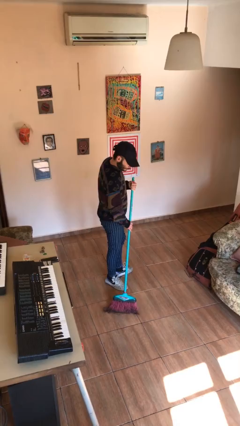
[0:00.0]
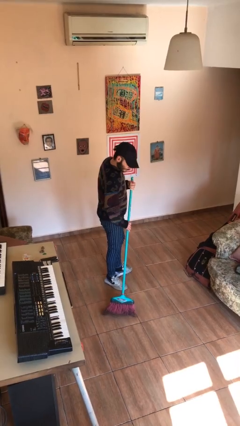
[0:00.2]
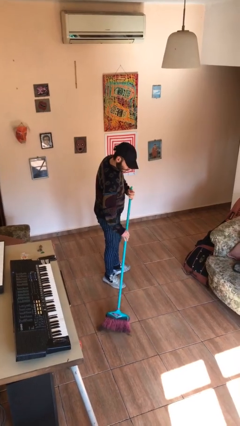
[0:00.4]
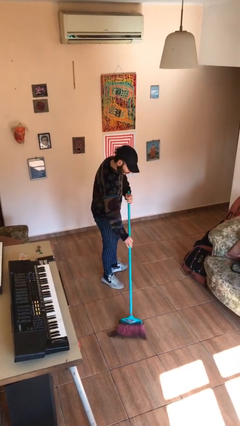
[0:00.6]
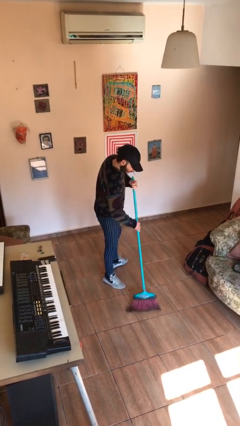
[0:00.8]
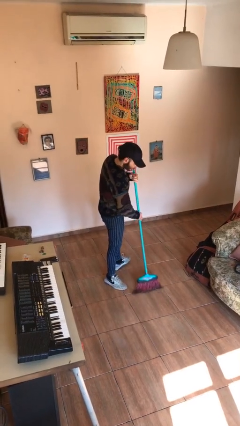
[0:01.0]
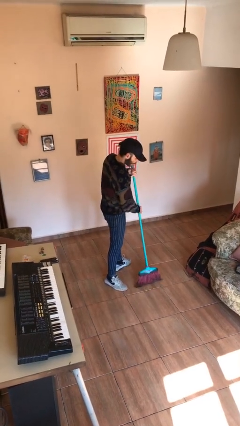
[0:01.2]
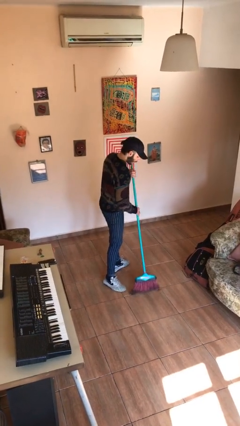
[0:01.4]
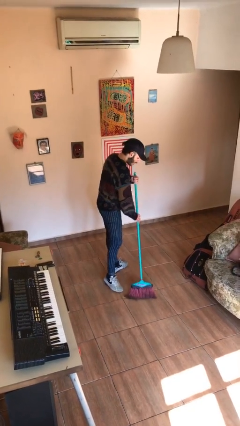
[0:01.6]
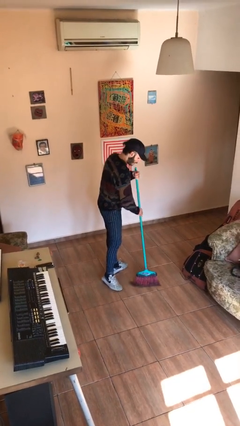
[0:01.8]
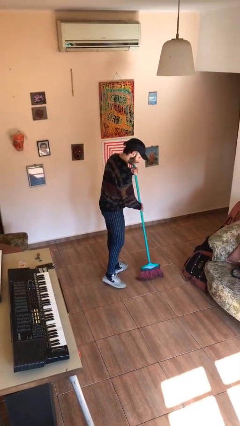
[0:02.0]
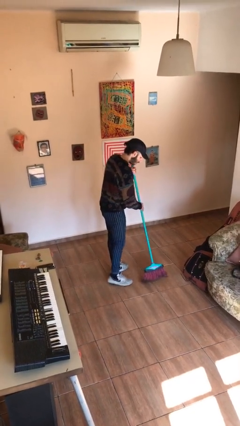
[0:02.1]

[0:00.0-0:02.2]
person sweeps floor

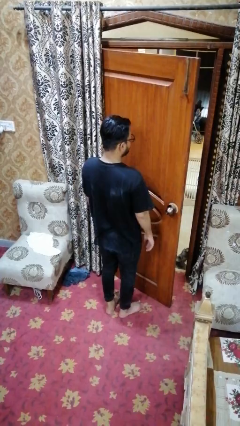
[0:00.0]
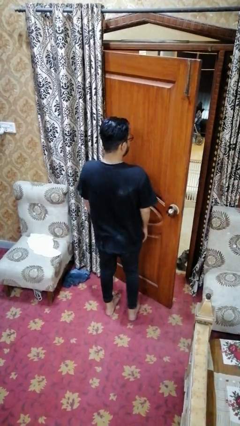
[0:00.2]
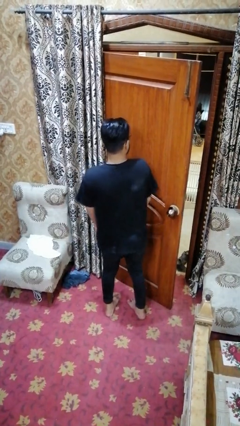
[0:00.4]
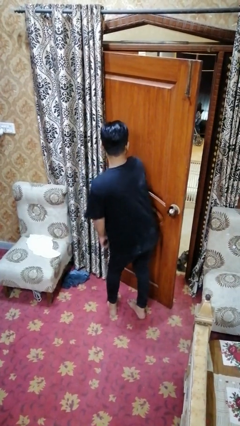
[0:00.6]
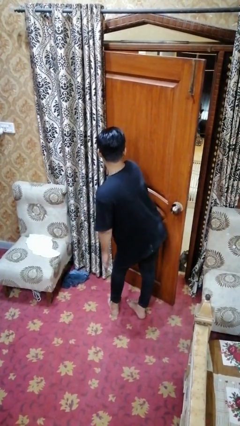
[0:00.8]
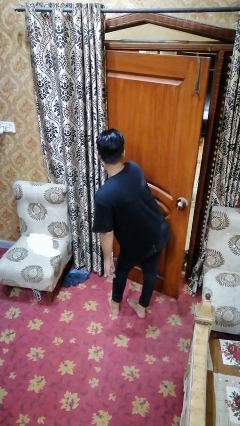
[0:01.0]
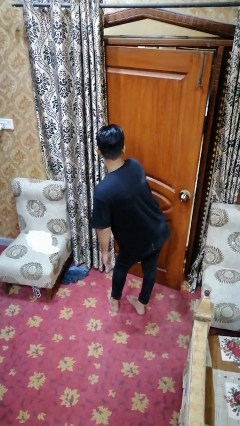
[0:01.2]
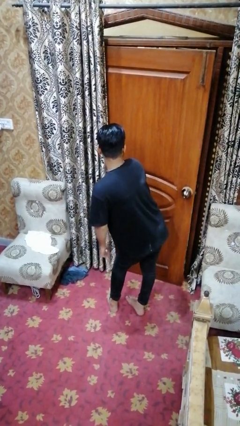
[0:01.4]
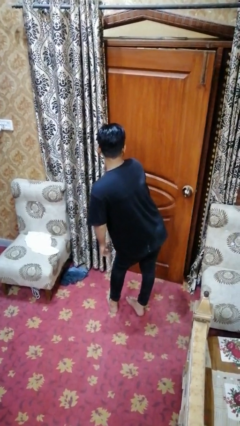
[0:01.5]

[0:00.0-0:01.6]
person closes door with hip

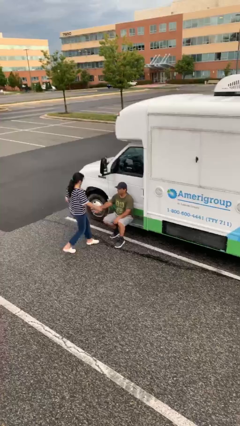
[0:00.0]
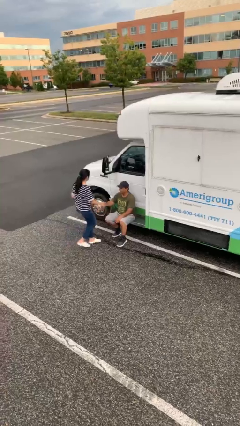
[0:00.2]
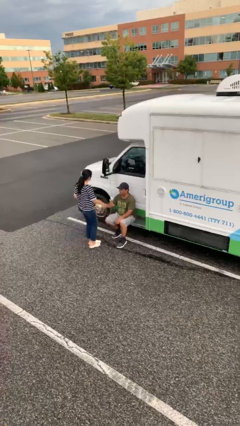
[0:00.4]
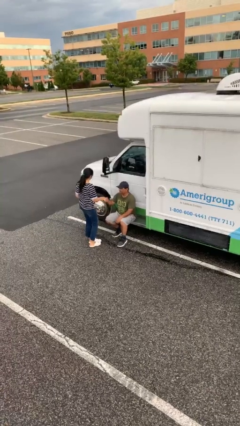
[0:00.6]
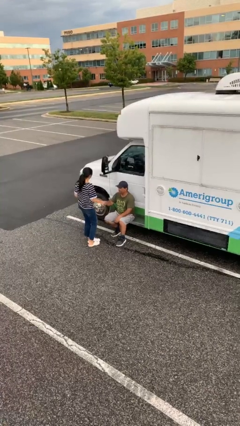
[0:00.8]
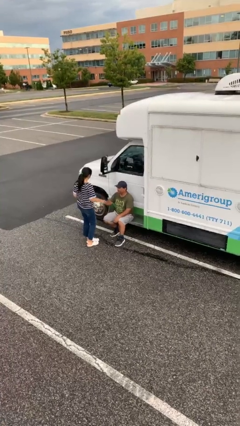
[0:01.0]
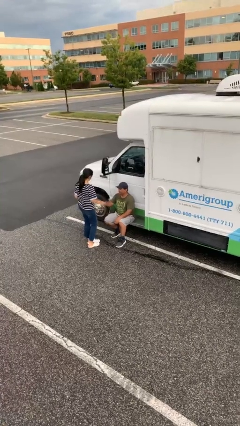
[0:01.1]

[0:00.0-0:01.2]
person shakes hand

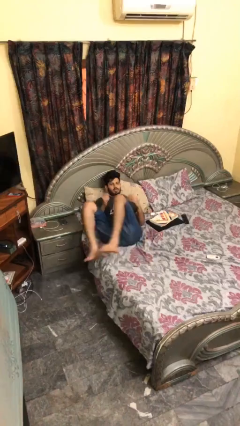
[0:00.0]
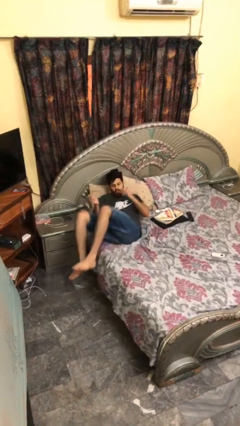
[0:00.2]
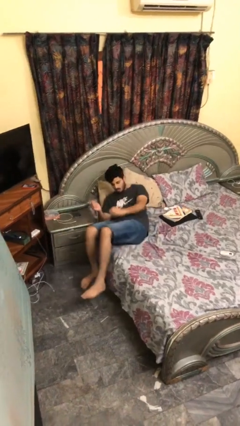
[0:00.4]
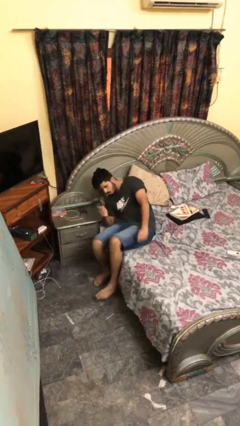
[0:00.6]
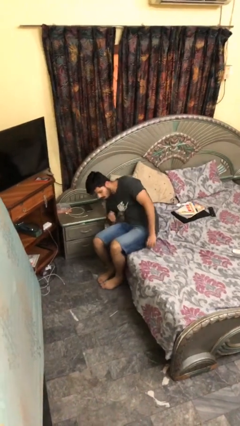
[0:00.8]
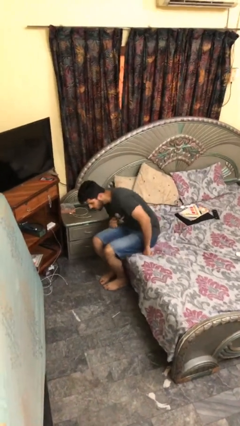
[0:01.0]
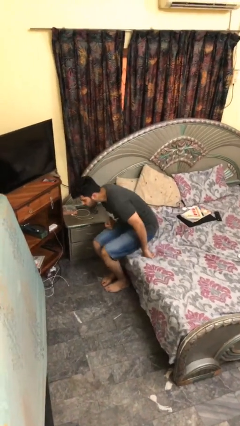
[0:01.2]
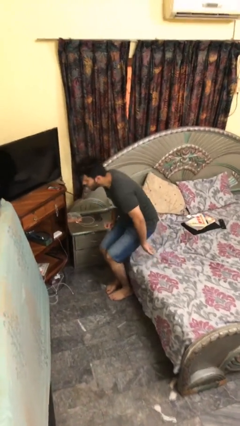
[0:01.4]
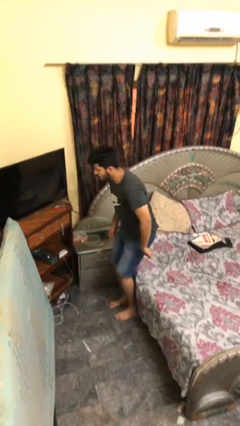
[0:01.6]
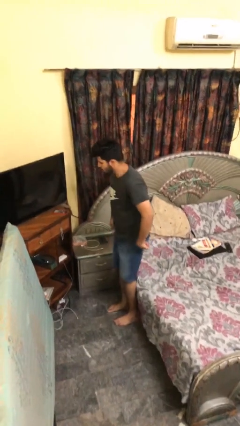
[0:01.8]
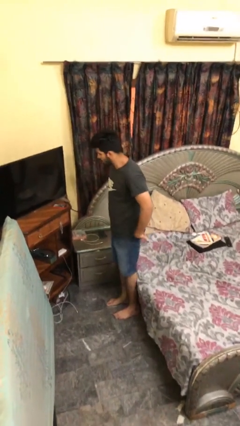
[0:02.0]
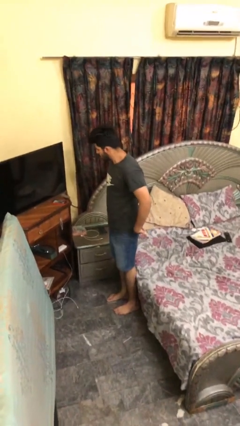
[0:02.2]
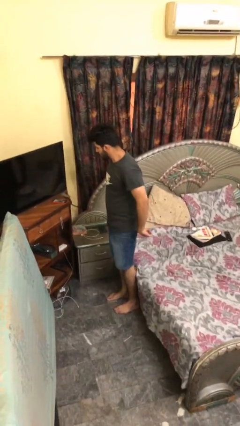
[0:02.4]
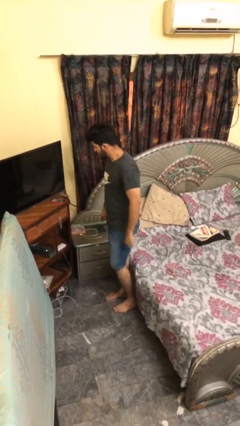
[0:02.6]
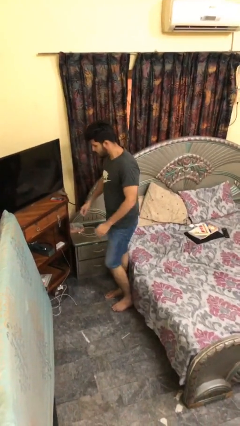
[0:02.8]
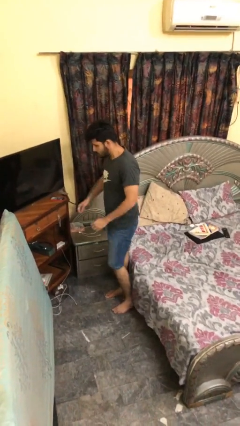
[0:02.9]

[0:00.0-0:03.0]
person stands up

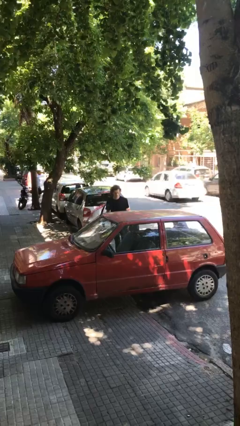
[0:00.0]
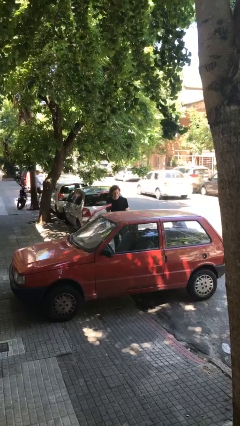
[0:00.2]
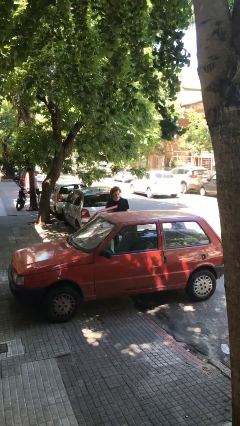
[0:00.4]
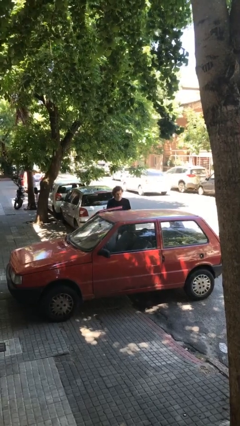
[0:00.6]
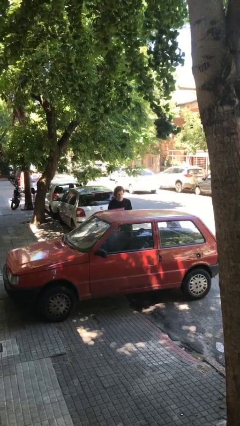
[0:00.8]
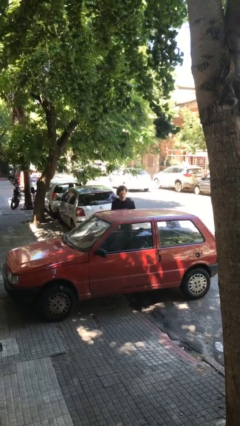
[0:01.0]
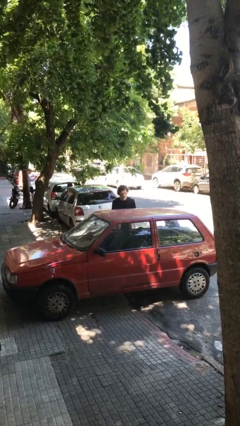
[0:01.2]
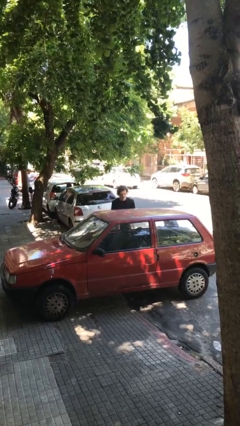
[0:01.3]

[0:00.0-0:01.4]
person closes car door

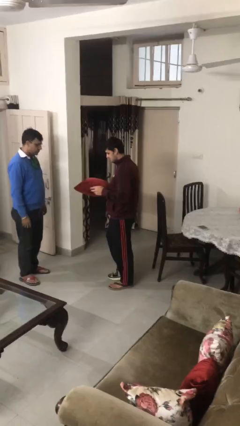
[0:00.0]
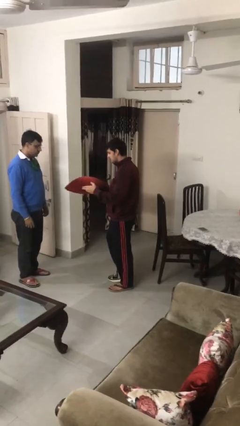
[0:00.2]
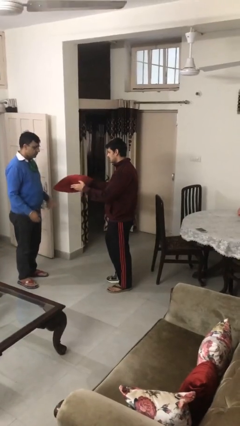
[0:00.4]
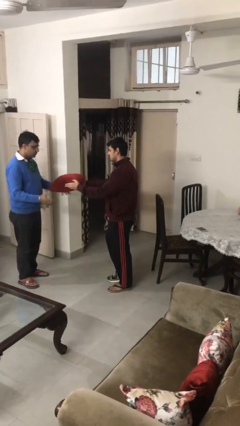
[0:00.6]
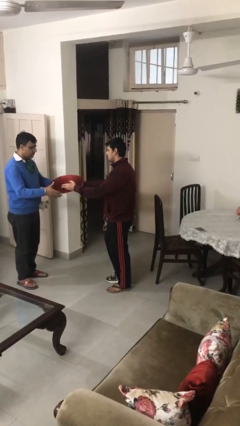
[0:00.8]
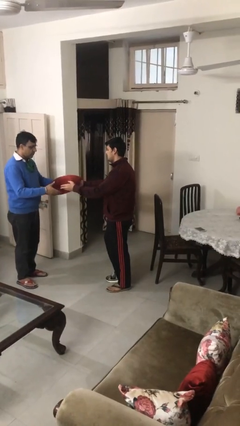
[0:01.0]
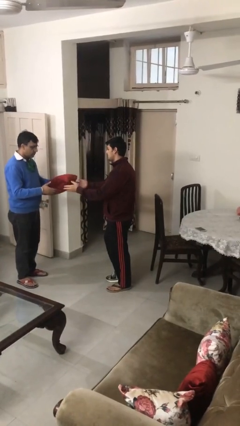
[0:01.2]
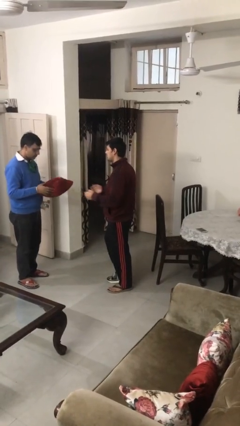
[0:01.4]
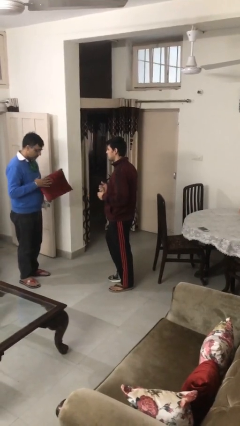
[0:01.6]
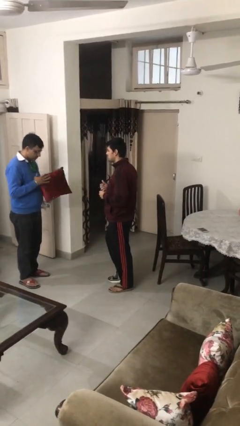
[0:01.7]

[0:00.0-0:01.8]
person transfers object to person

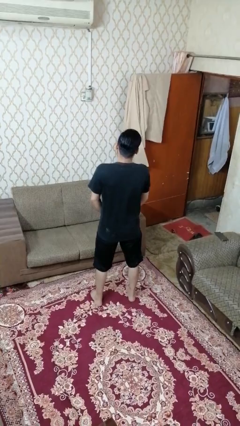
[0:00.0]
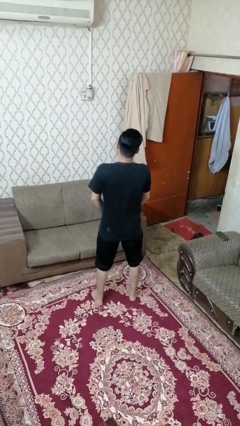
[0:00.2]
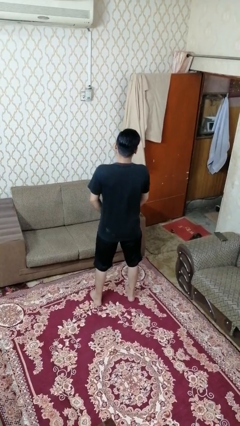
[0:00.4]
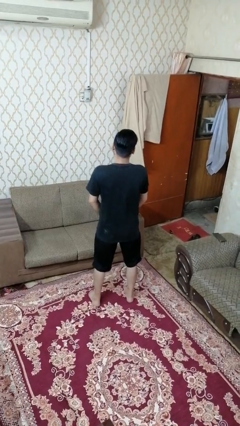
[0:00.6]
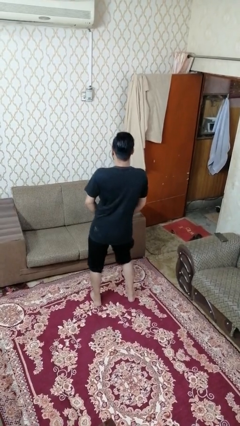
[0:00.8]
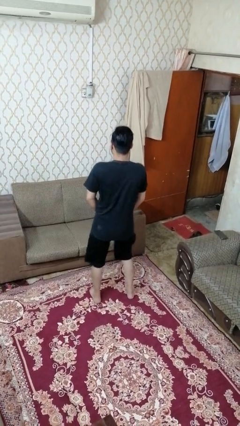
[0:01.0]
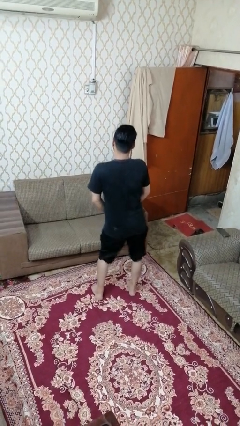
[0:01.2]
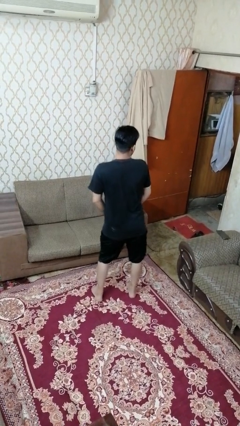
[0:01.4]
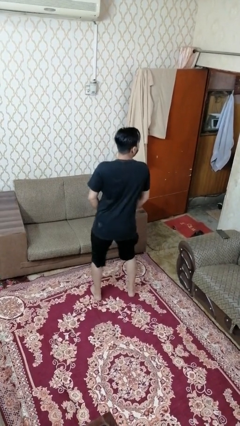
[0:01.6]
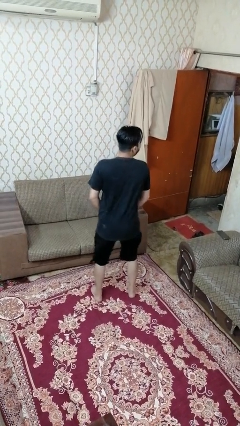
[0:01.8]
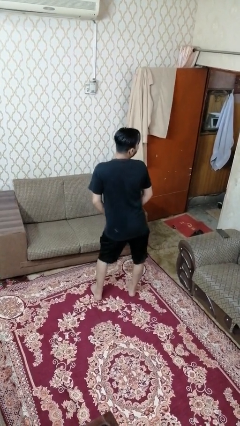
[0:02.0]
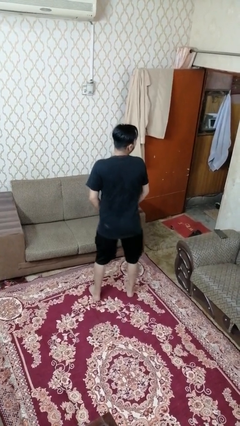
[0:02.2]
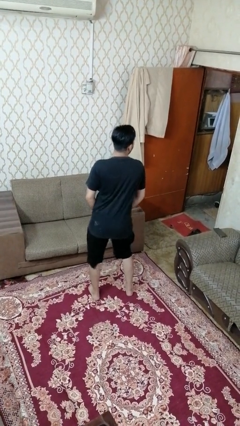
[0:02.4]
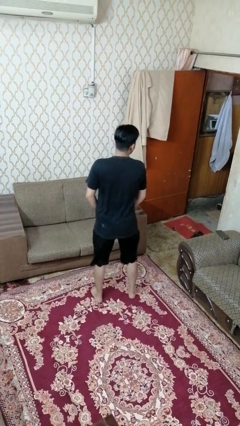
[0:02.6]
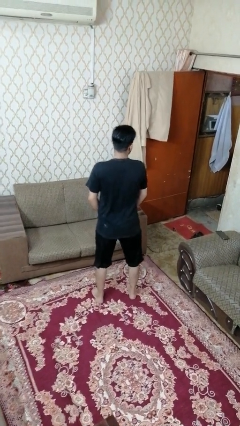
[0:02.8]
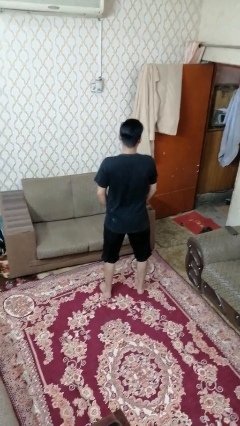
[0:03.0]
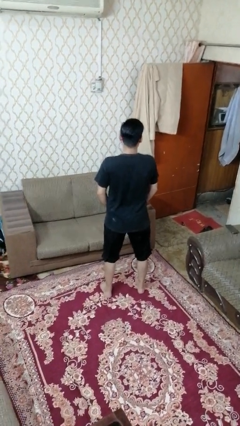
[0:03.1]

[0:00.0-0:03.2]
person wiggles hips

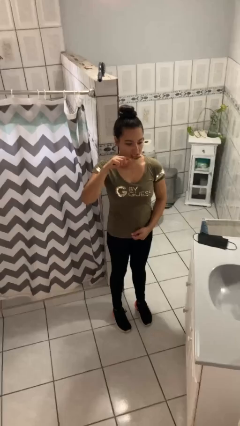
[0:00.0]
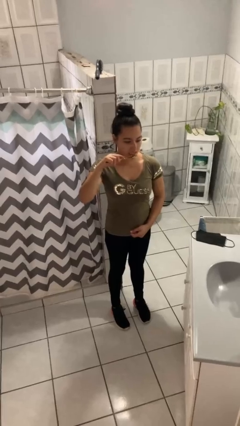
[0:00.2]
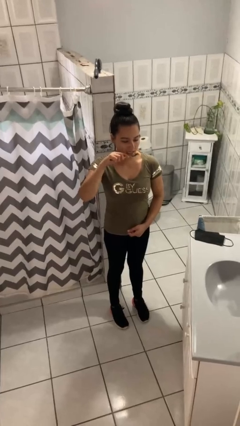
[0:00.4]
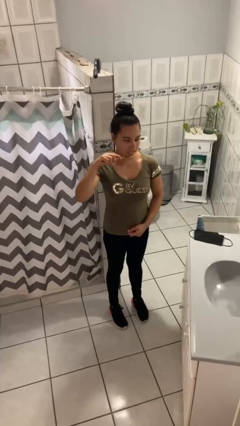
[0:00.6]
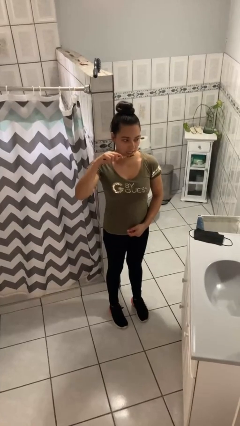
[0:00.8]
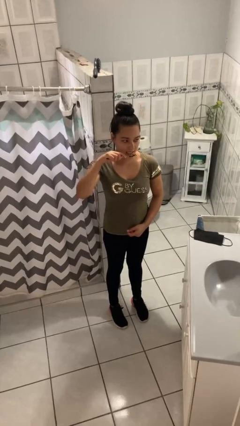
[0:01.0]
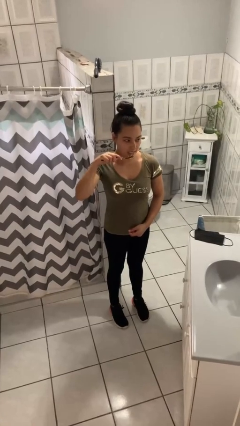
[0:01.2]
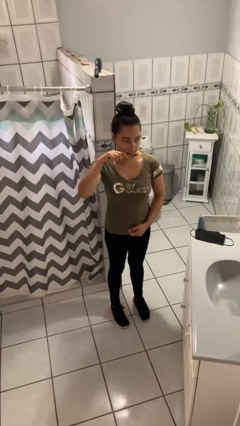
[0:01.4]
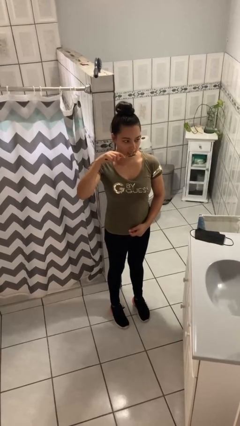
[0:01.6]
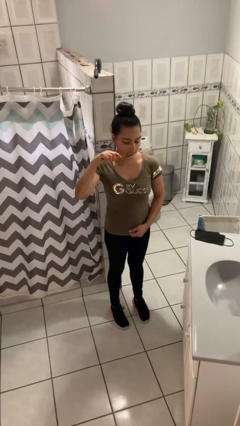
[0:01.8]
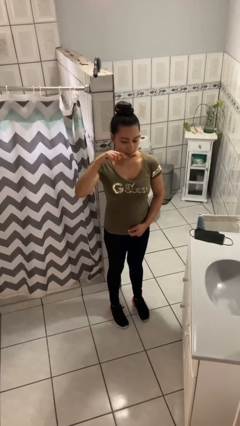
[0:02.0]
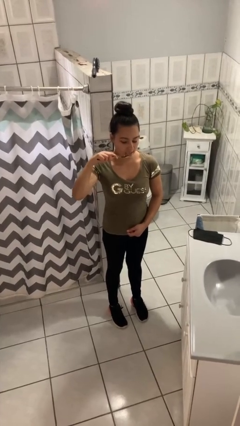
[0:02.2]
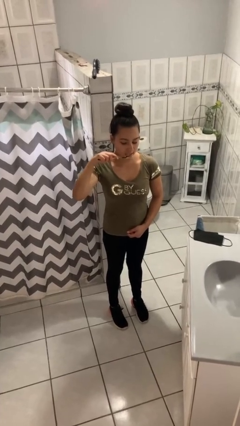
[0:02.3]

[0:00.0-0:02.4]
person brushes teeth
